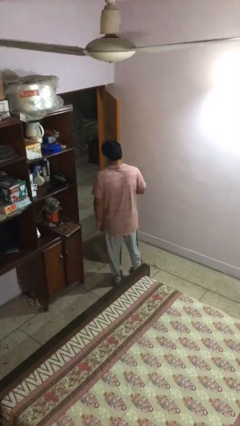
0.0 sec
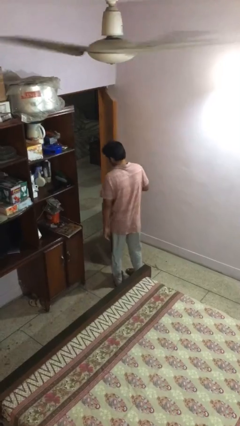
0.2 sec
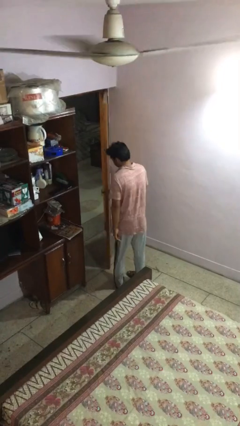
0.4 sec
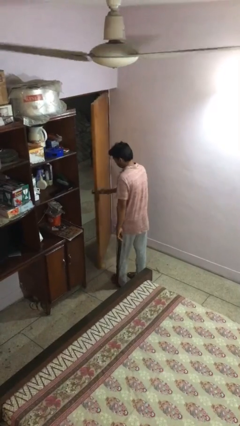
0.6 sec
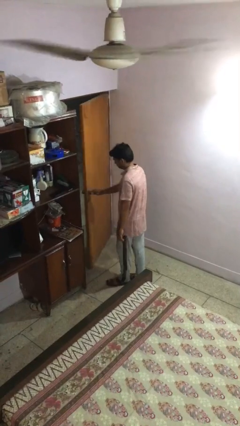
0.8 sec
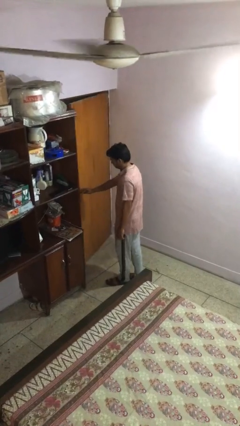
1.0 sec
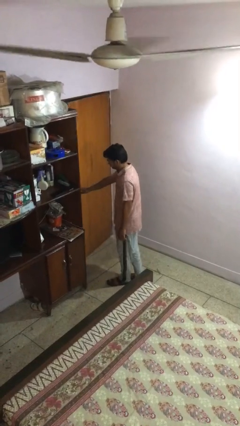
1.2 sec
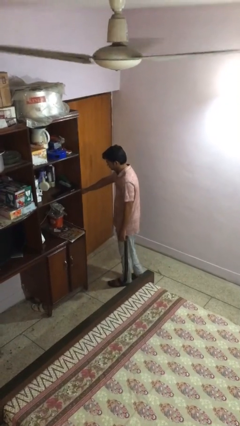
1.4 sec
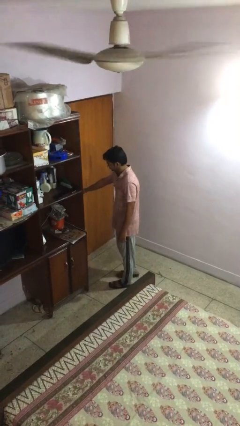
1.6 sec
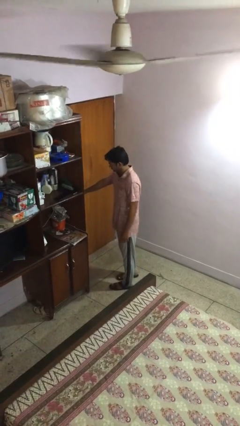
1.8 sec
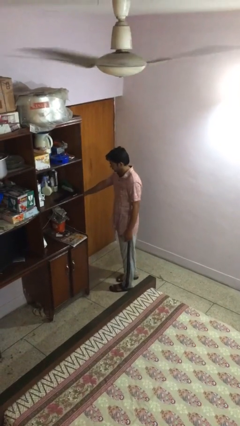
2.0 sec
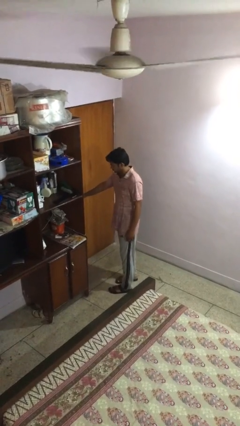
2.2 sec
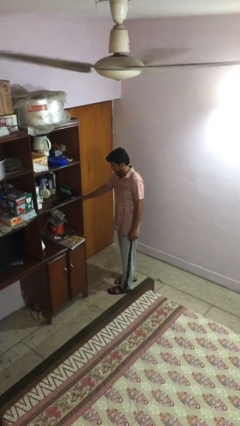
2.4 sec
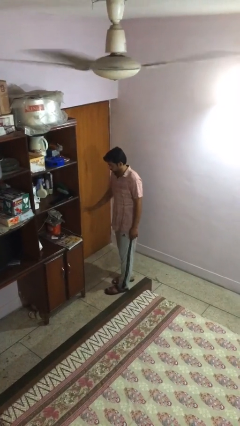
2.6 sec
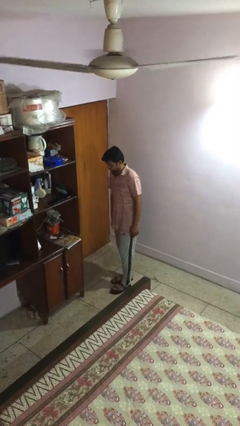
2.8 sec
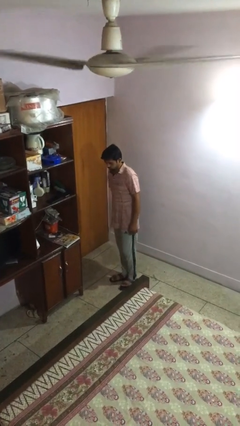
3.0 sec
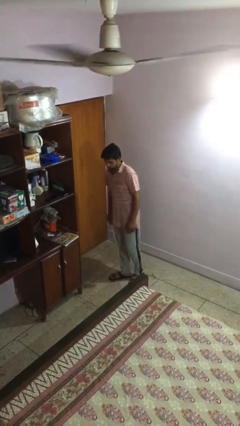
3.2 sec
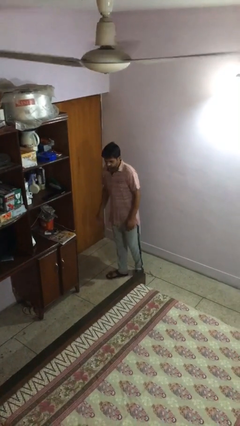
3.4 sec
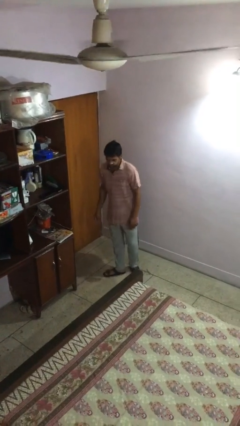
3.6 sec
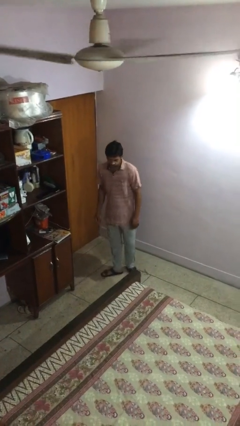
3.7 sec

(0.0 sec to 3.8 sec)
person closes facility door

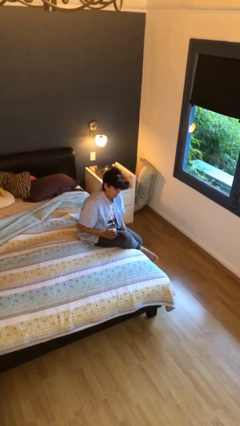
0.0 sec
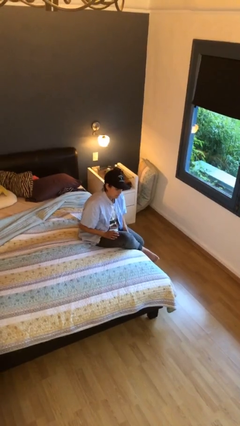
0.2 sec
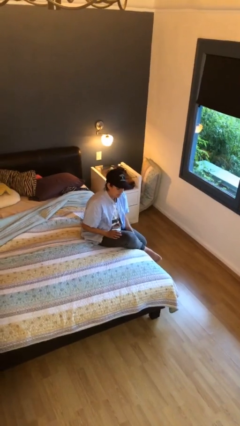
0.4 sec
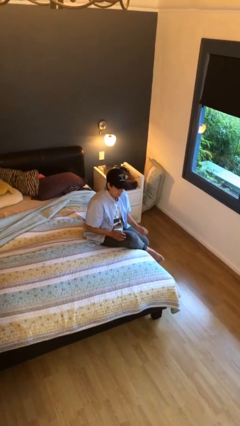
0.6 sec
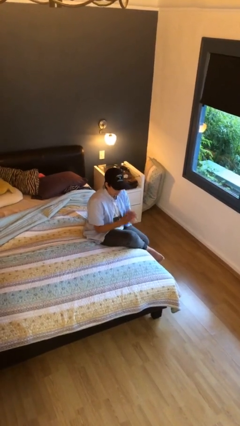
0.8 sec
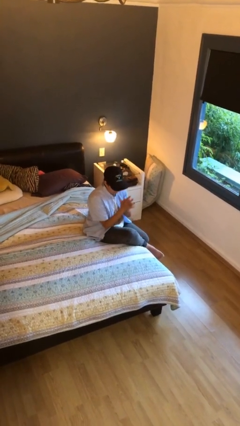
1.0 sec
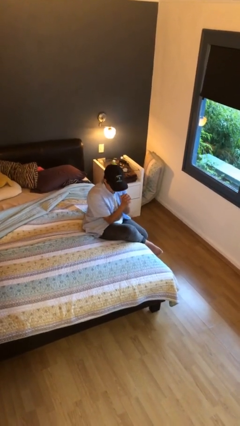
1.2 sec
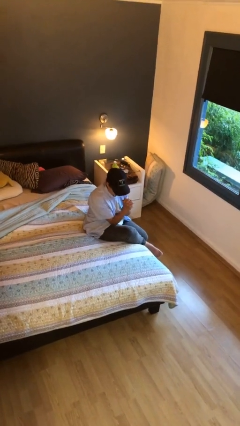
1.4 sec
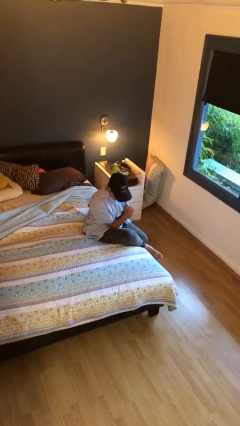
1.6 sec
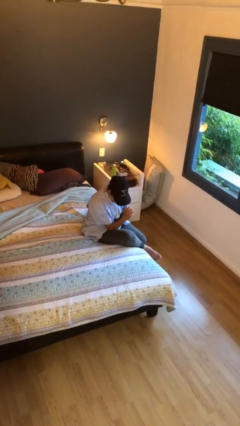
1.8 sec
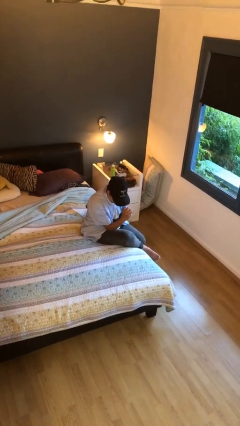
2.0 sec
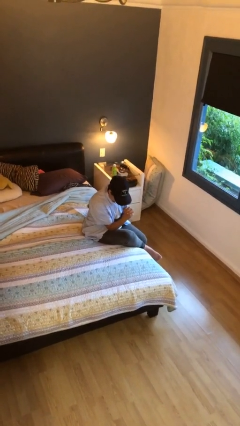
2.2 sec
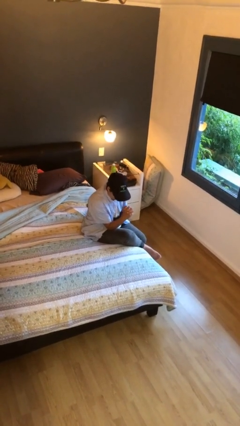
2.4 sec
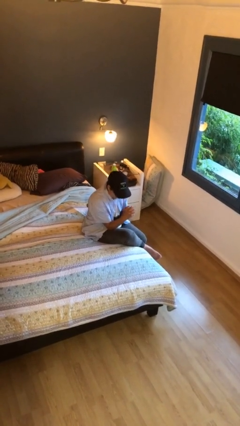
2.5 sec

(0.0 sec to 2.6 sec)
person prays

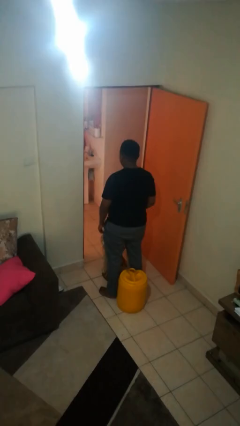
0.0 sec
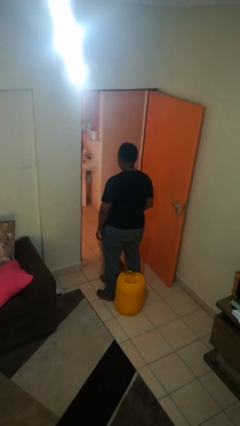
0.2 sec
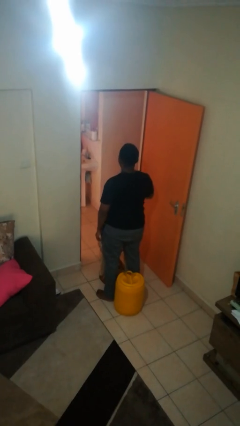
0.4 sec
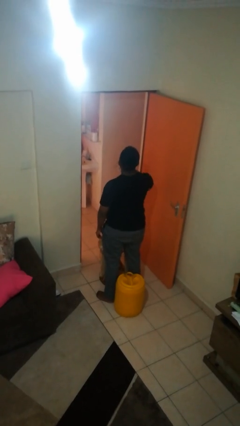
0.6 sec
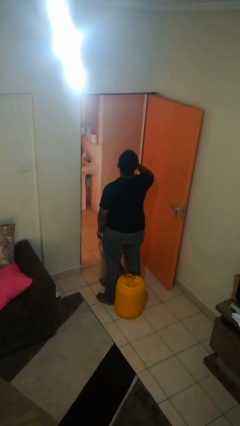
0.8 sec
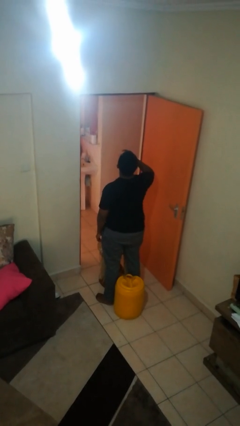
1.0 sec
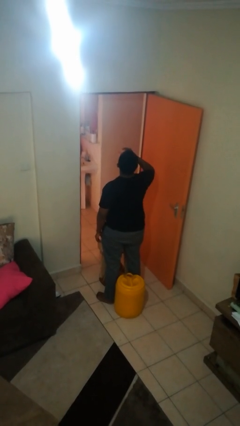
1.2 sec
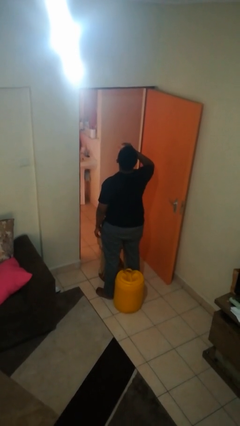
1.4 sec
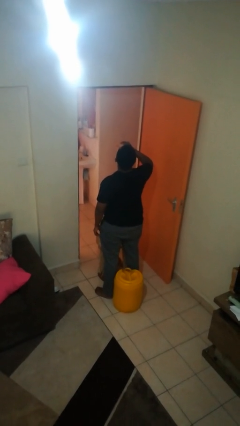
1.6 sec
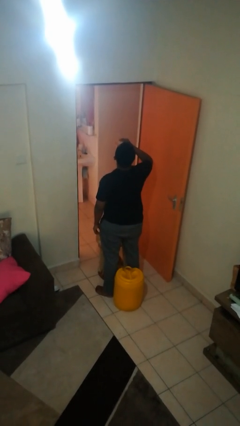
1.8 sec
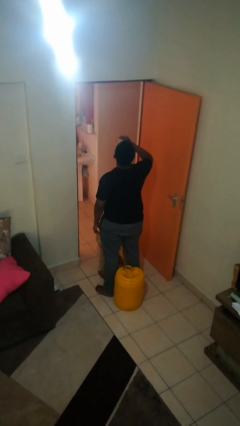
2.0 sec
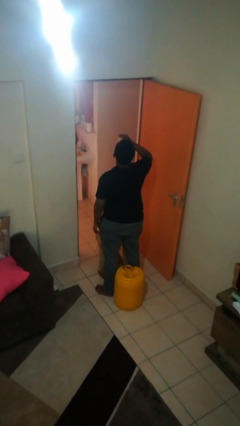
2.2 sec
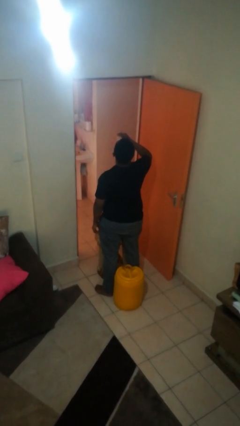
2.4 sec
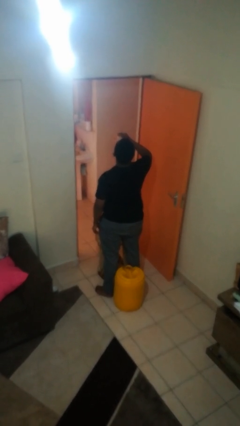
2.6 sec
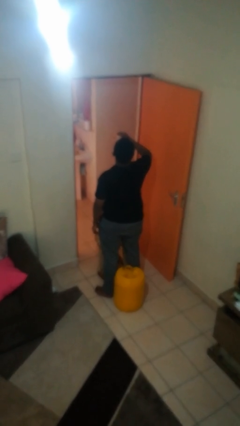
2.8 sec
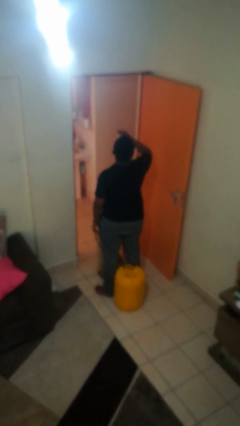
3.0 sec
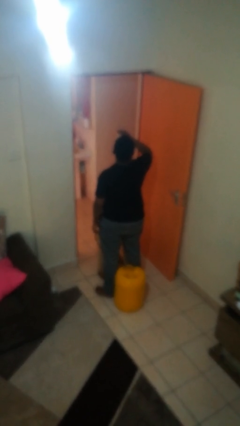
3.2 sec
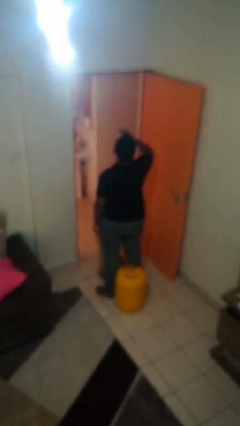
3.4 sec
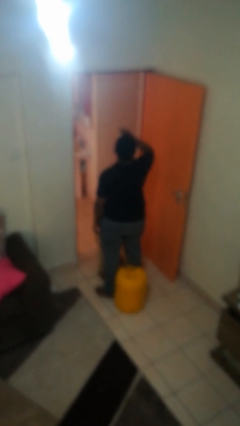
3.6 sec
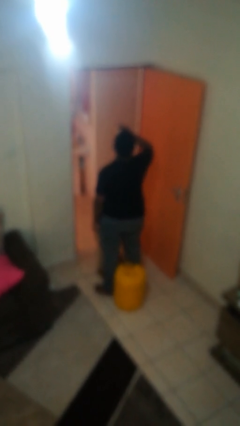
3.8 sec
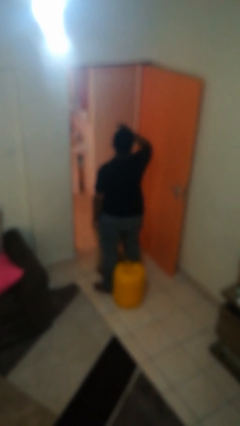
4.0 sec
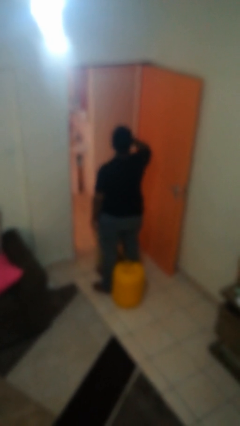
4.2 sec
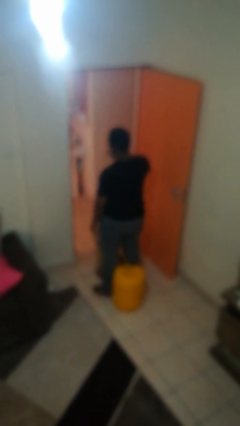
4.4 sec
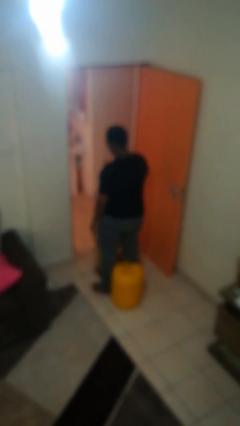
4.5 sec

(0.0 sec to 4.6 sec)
person drinks from bottle

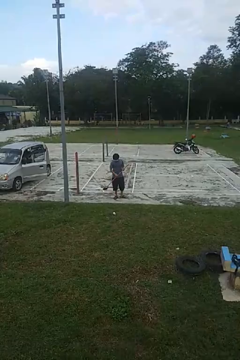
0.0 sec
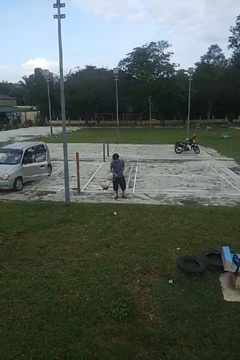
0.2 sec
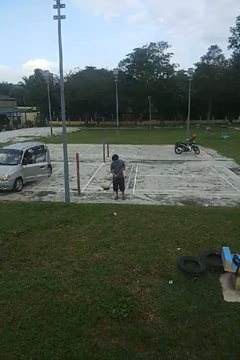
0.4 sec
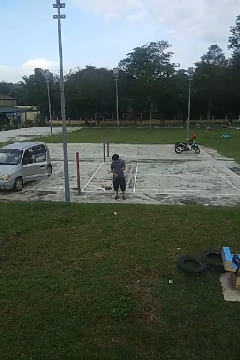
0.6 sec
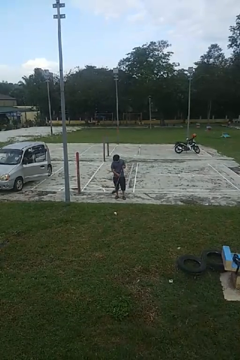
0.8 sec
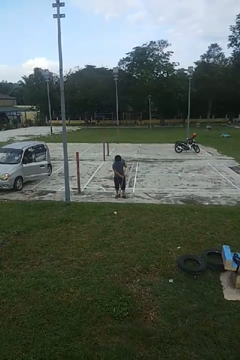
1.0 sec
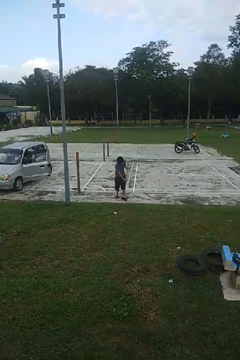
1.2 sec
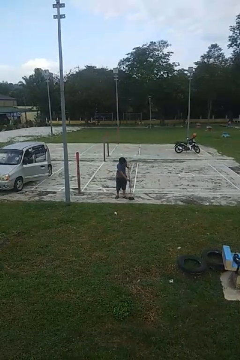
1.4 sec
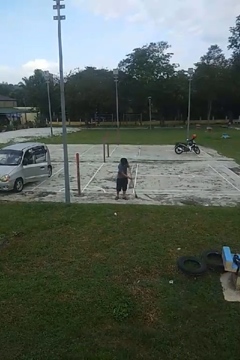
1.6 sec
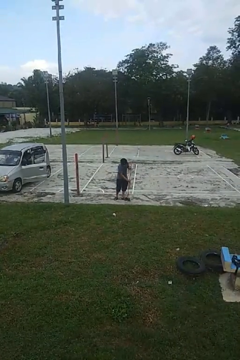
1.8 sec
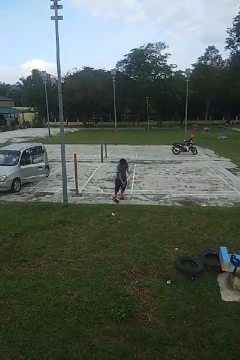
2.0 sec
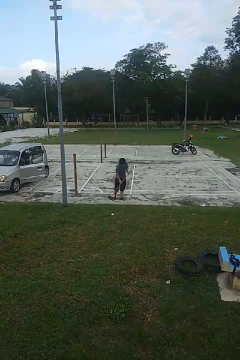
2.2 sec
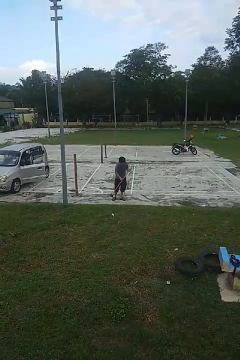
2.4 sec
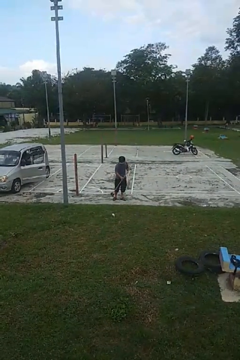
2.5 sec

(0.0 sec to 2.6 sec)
person sweeps floor

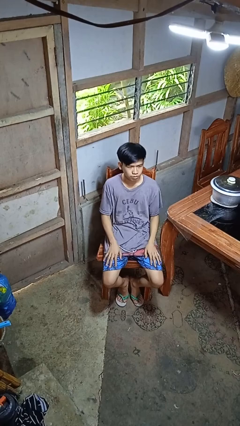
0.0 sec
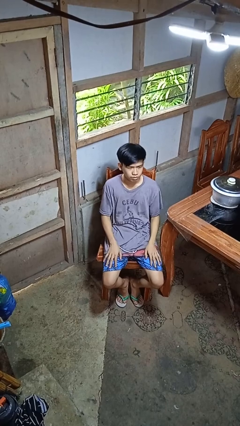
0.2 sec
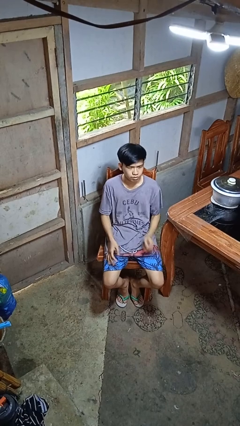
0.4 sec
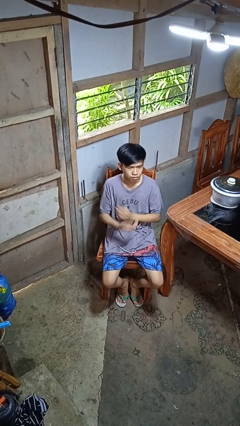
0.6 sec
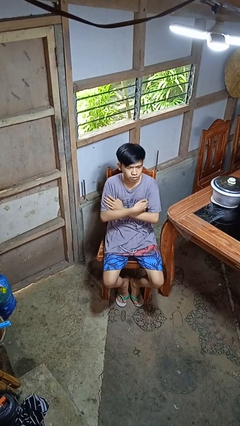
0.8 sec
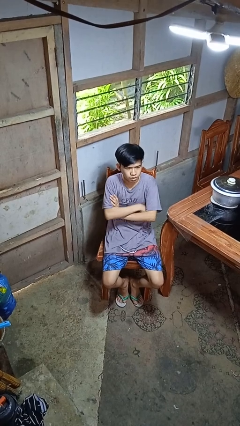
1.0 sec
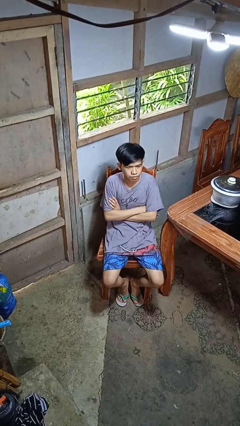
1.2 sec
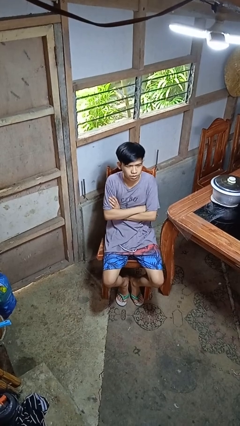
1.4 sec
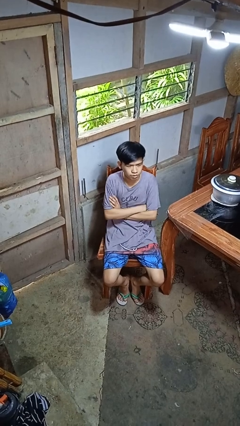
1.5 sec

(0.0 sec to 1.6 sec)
person crosses arms

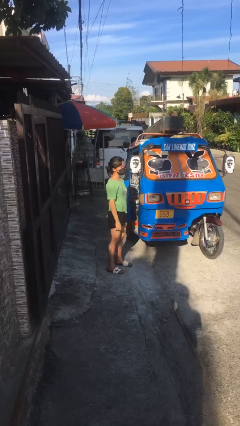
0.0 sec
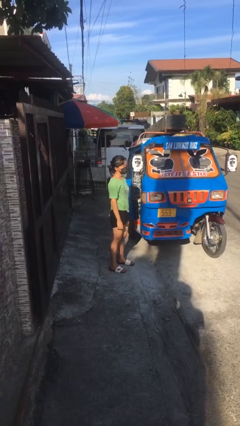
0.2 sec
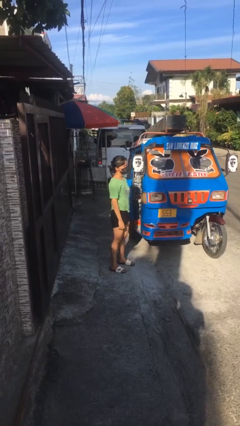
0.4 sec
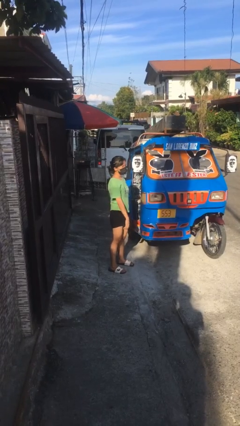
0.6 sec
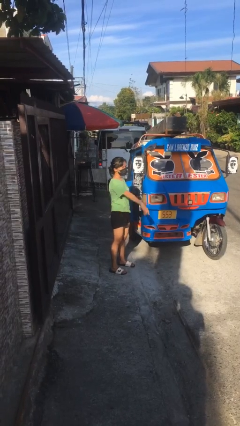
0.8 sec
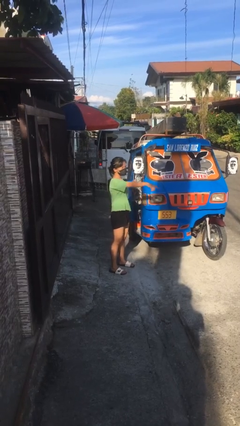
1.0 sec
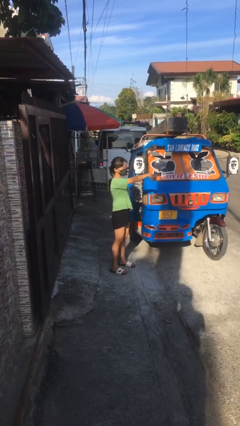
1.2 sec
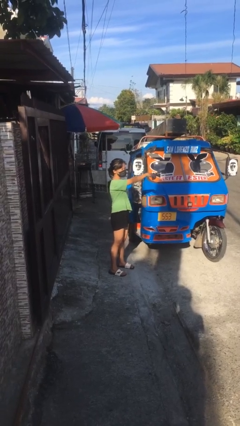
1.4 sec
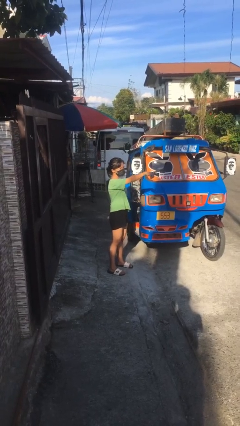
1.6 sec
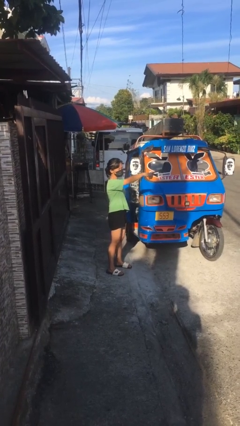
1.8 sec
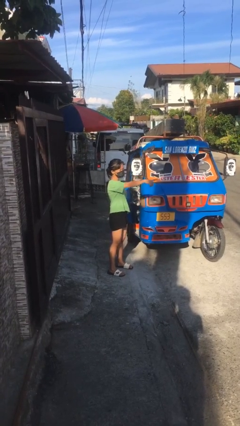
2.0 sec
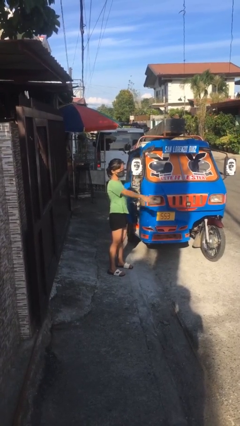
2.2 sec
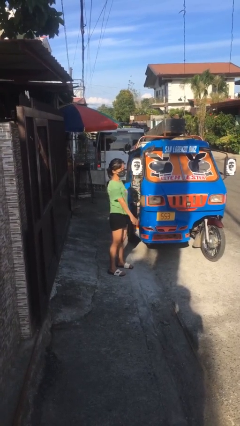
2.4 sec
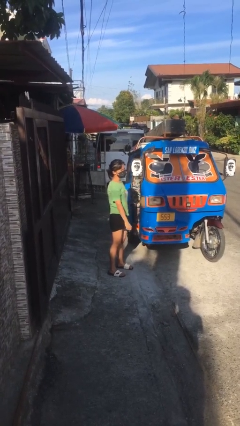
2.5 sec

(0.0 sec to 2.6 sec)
person points at person
